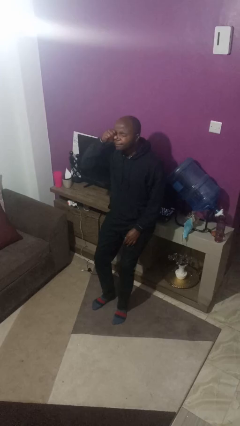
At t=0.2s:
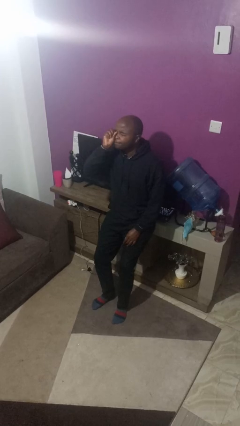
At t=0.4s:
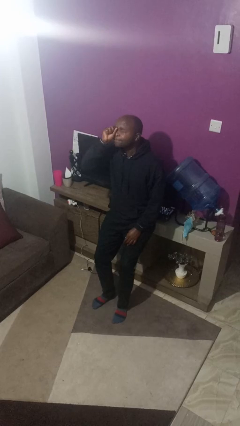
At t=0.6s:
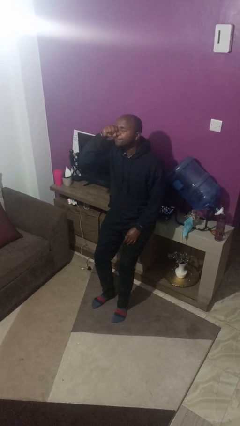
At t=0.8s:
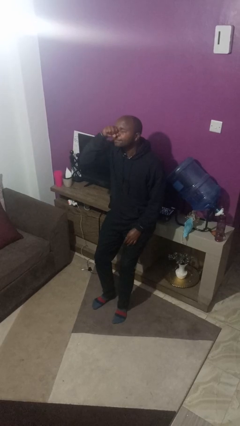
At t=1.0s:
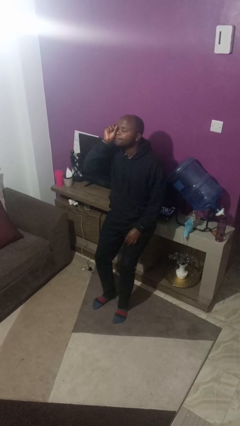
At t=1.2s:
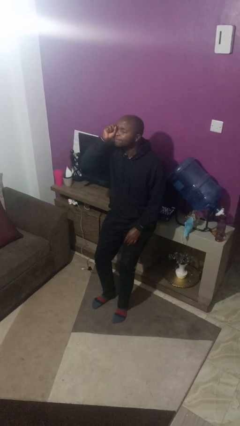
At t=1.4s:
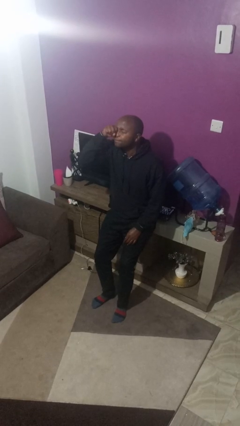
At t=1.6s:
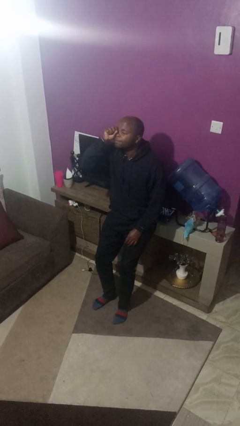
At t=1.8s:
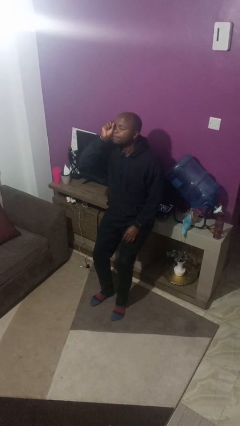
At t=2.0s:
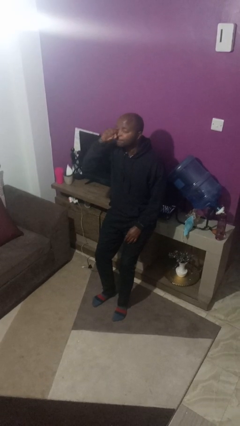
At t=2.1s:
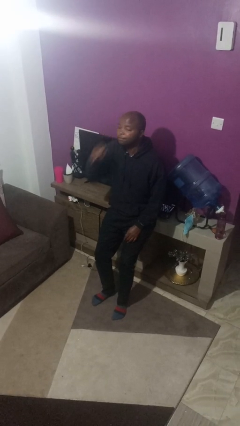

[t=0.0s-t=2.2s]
person rubs eyes

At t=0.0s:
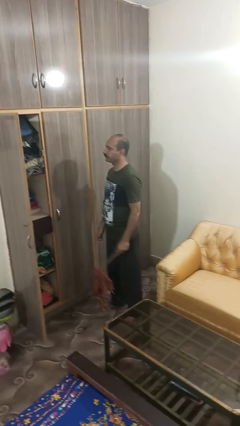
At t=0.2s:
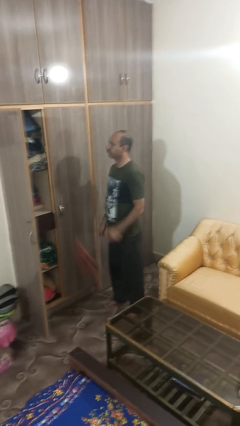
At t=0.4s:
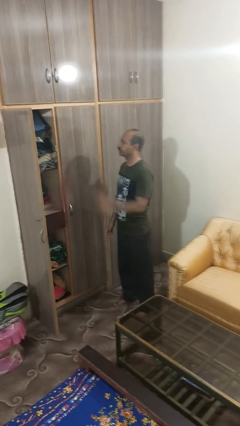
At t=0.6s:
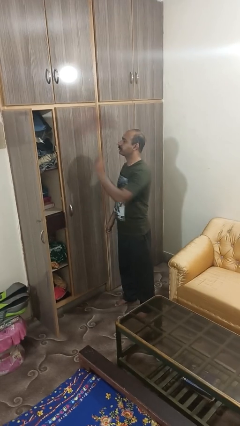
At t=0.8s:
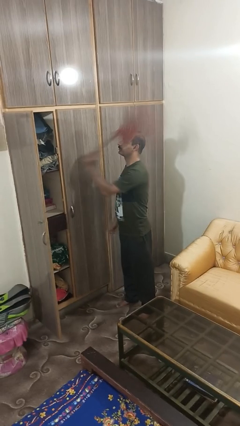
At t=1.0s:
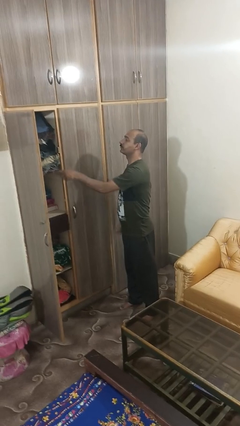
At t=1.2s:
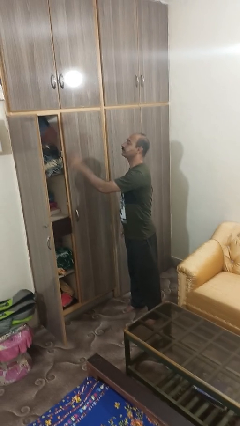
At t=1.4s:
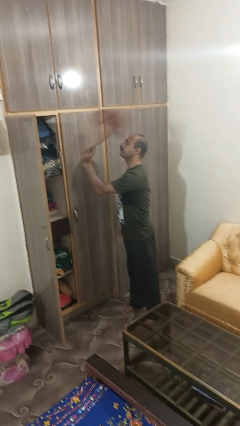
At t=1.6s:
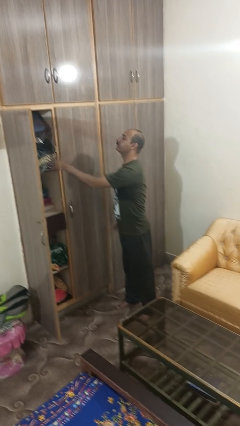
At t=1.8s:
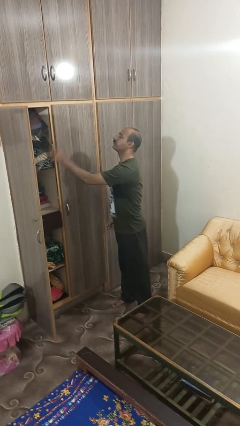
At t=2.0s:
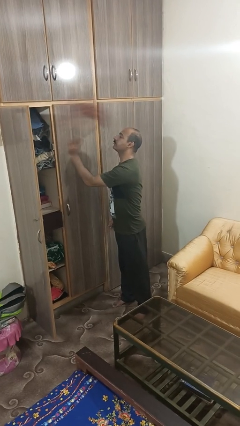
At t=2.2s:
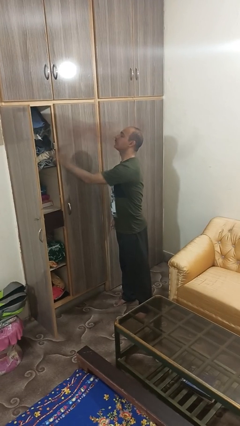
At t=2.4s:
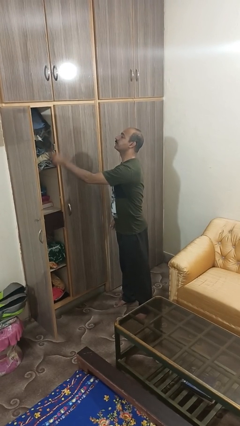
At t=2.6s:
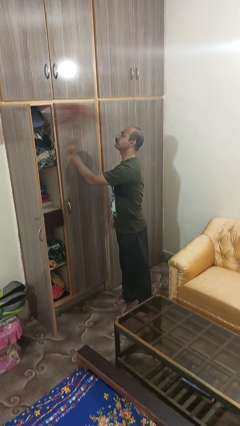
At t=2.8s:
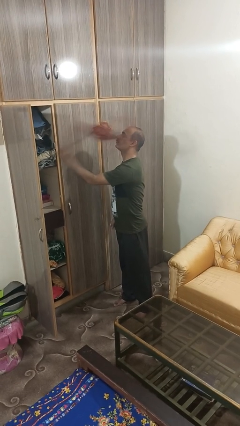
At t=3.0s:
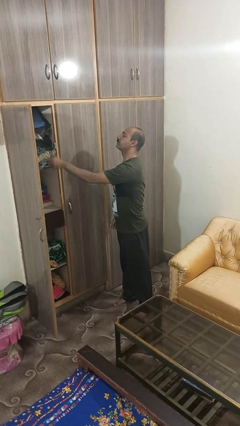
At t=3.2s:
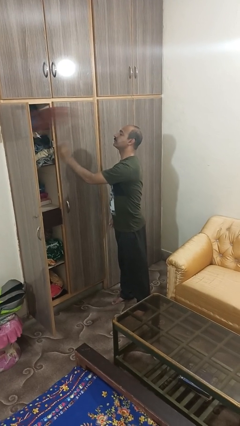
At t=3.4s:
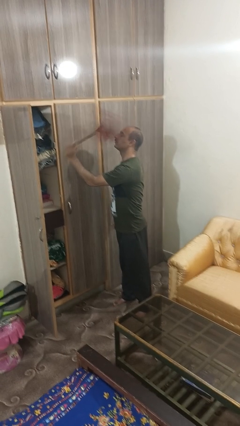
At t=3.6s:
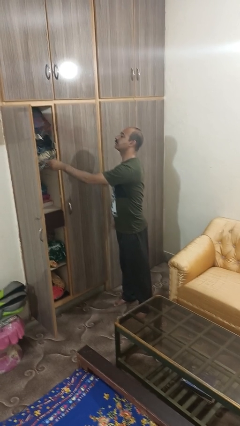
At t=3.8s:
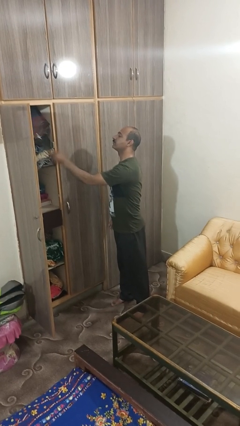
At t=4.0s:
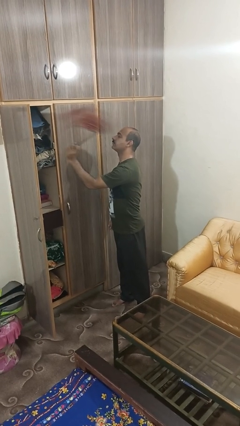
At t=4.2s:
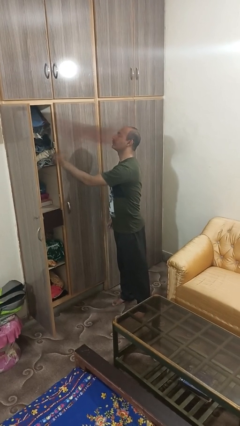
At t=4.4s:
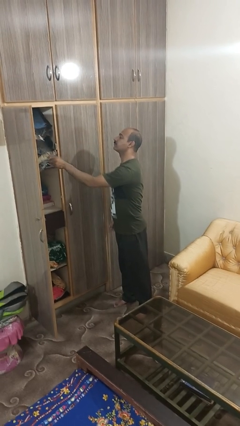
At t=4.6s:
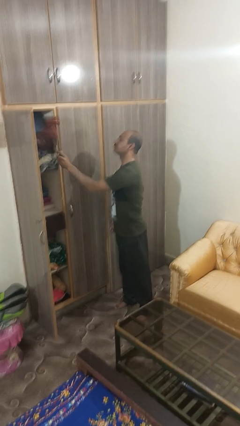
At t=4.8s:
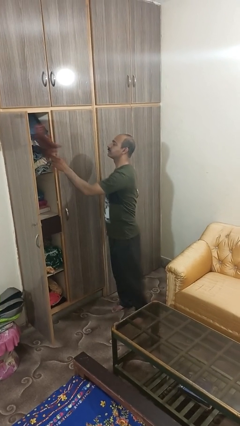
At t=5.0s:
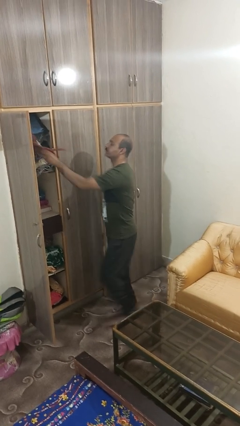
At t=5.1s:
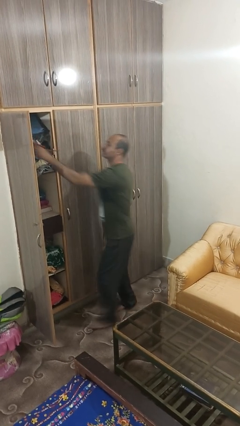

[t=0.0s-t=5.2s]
person dusts furniture

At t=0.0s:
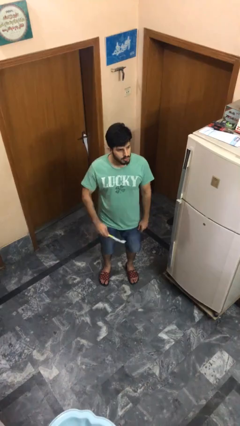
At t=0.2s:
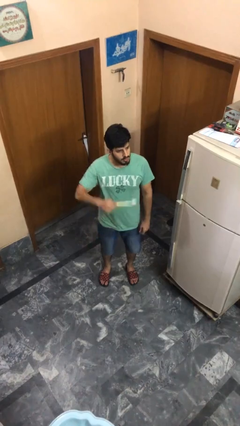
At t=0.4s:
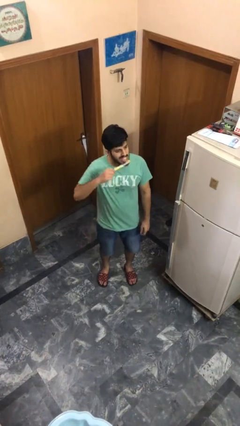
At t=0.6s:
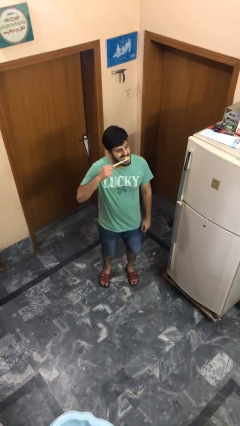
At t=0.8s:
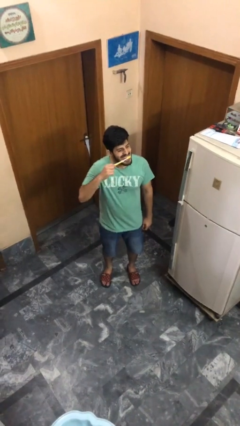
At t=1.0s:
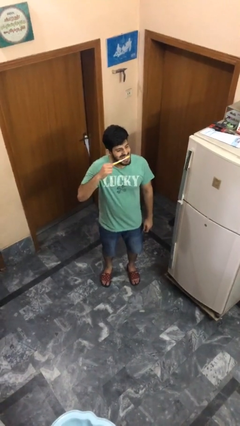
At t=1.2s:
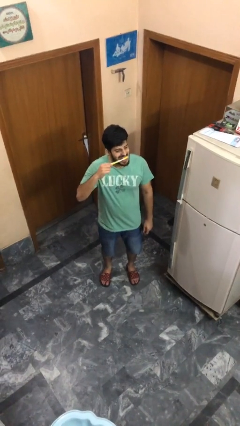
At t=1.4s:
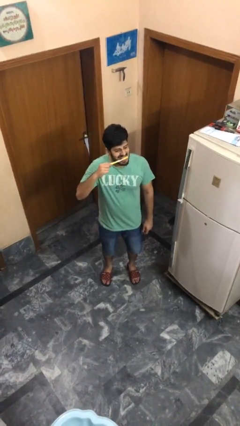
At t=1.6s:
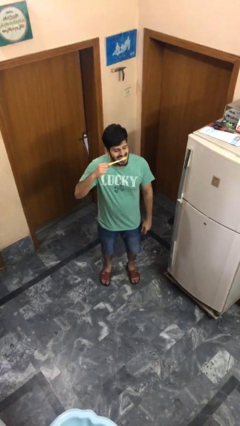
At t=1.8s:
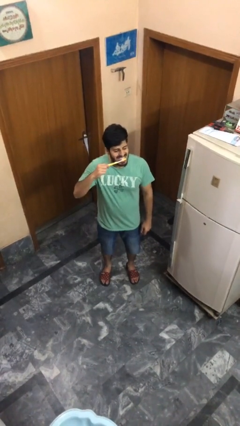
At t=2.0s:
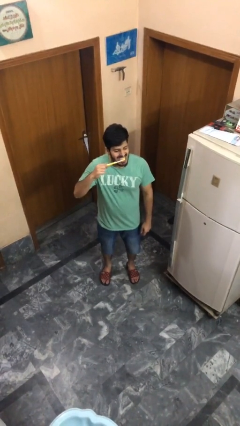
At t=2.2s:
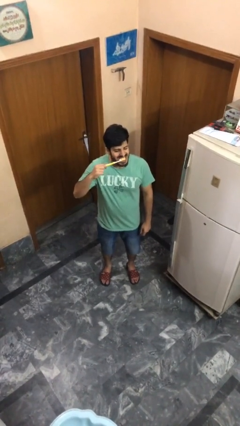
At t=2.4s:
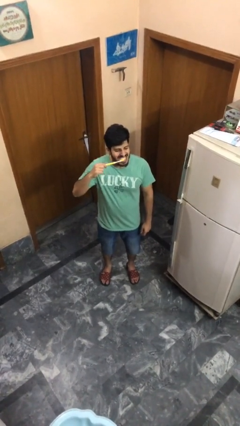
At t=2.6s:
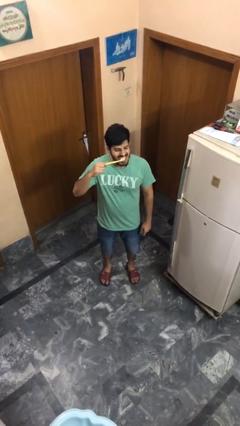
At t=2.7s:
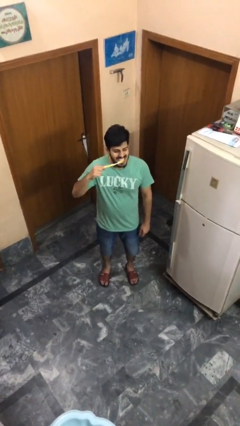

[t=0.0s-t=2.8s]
person brushes teeth

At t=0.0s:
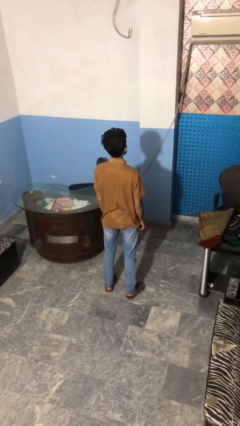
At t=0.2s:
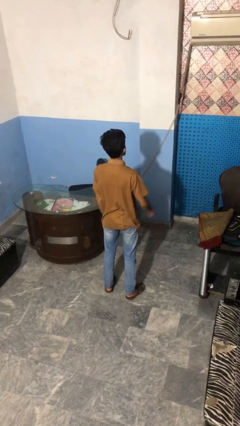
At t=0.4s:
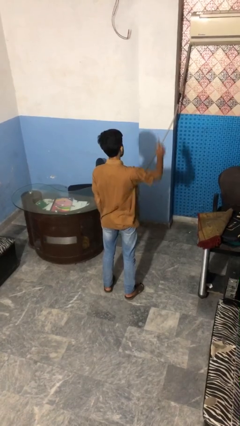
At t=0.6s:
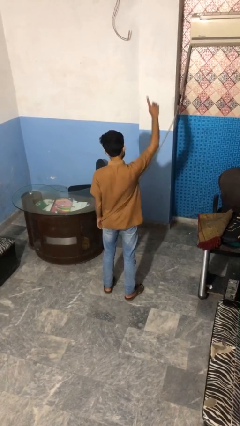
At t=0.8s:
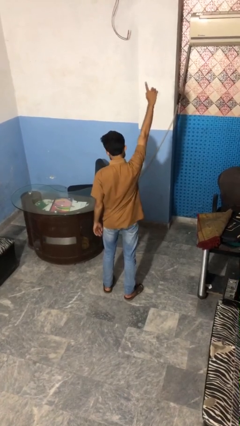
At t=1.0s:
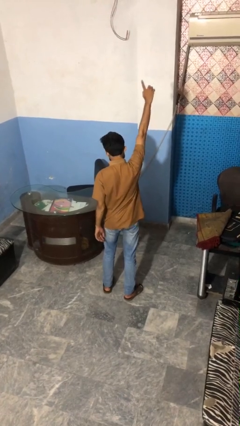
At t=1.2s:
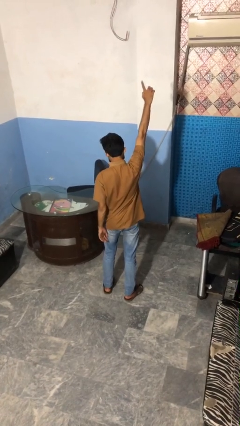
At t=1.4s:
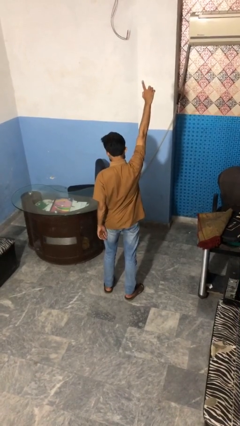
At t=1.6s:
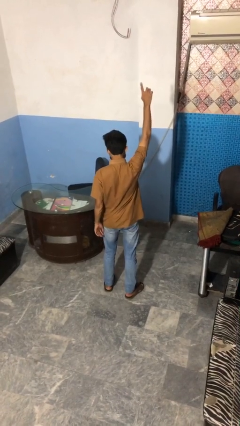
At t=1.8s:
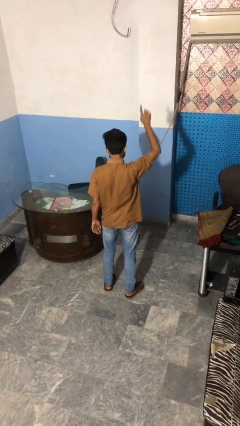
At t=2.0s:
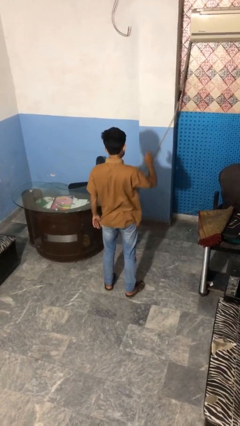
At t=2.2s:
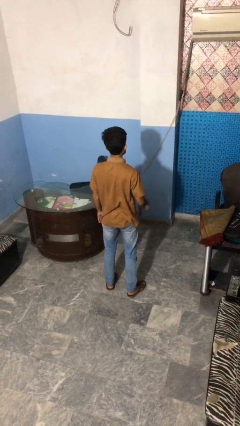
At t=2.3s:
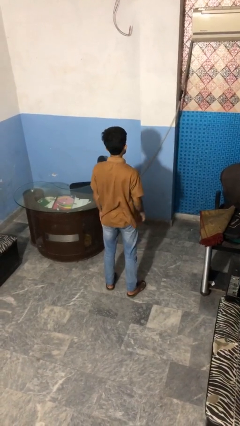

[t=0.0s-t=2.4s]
person gestures number one

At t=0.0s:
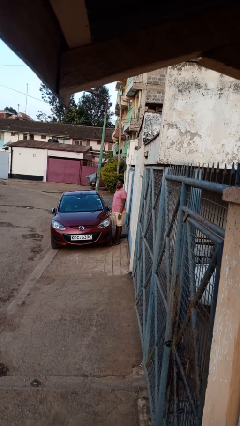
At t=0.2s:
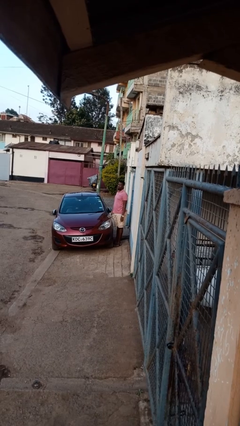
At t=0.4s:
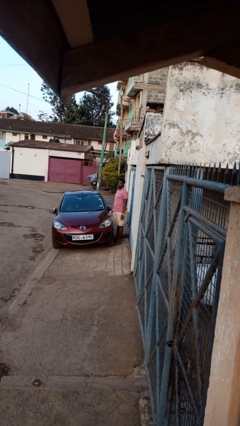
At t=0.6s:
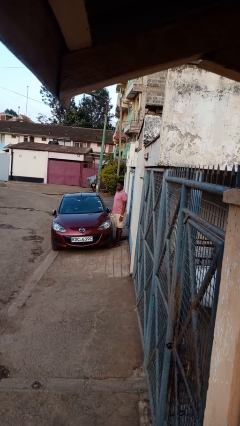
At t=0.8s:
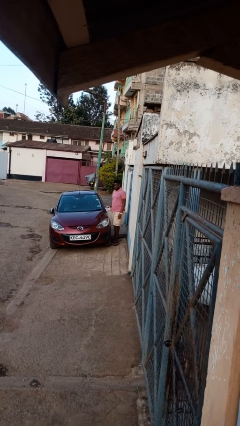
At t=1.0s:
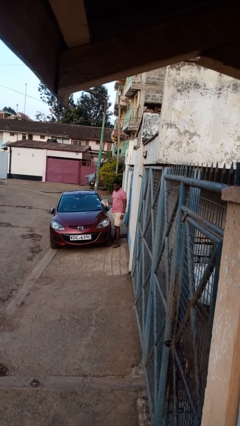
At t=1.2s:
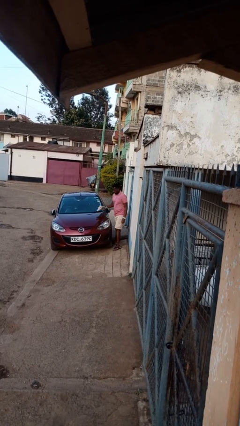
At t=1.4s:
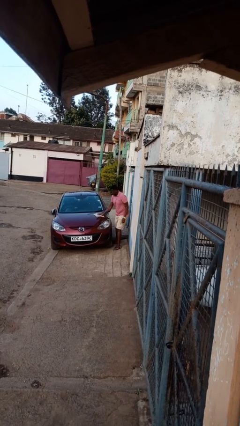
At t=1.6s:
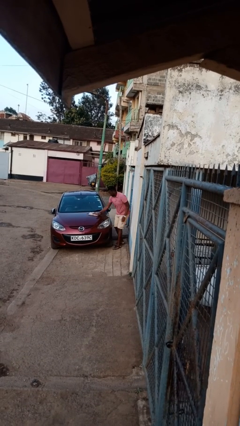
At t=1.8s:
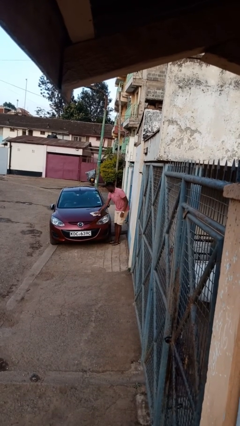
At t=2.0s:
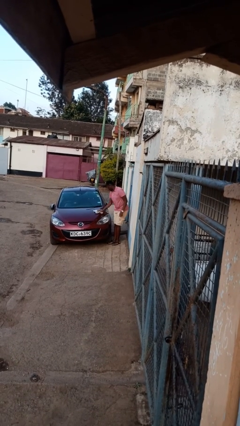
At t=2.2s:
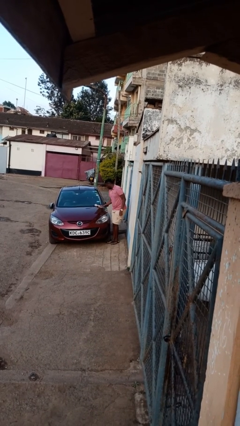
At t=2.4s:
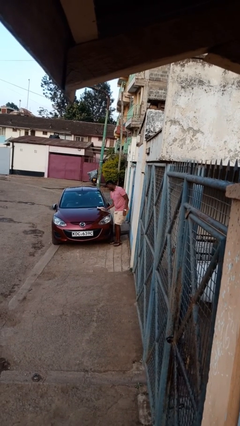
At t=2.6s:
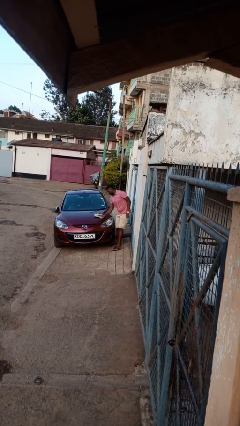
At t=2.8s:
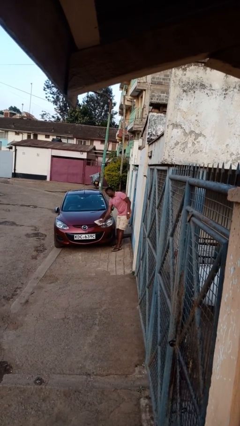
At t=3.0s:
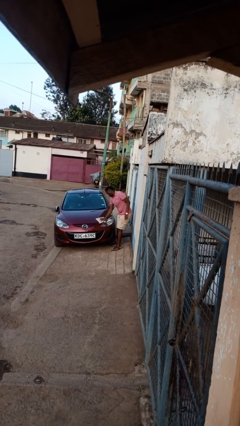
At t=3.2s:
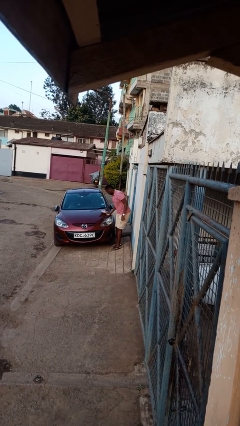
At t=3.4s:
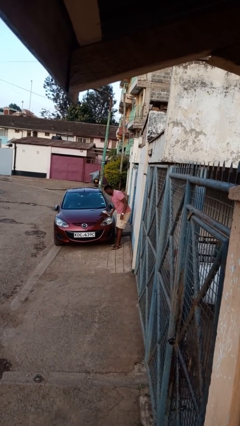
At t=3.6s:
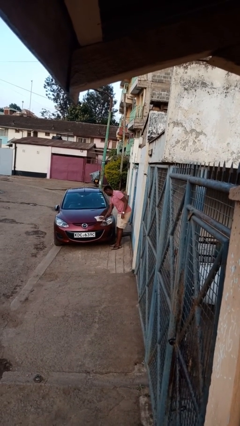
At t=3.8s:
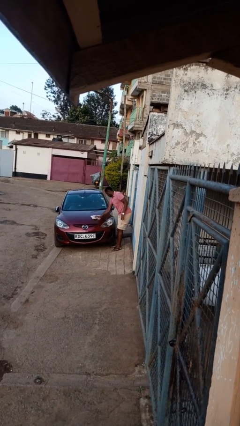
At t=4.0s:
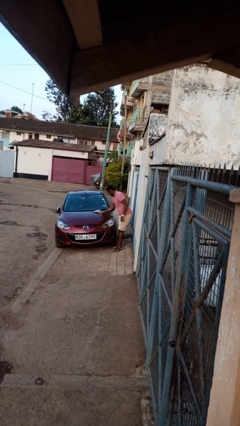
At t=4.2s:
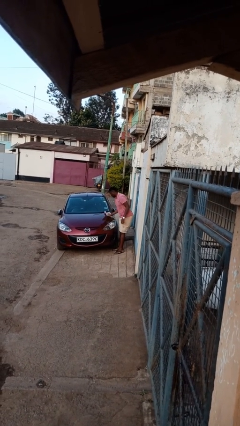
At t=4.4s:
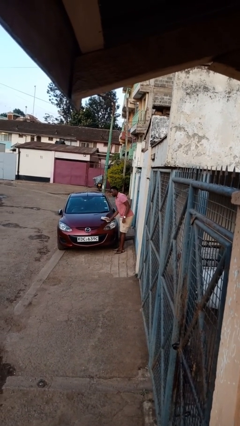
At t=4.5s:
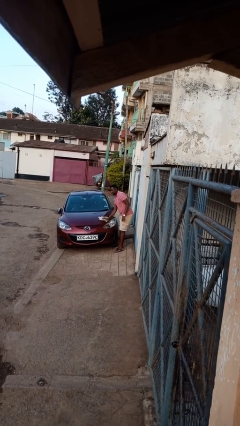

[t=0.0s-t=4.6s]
person polishes car with rag
